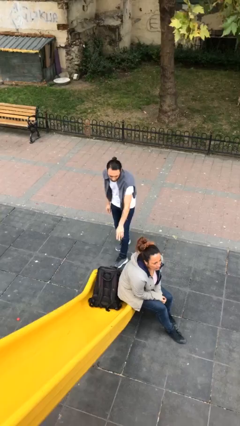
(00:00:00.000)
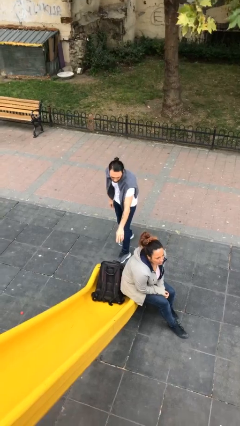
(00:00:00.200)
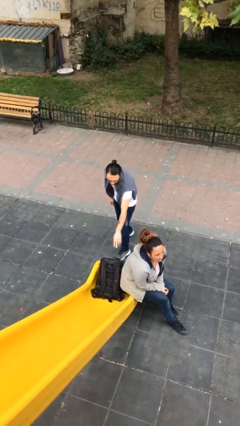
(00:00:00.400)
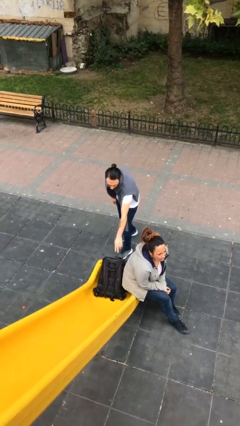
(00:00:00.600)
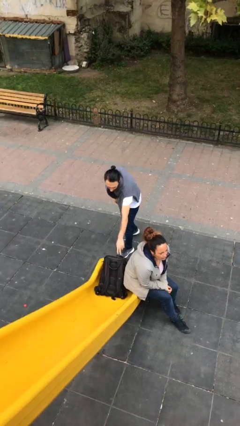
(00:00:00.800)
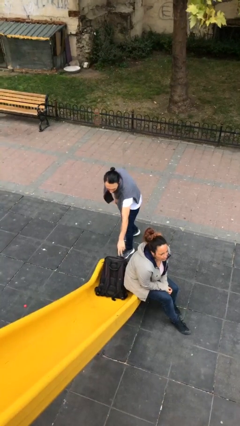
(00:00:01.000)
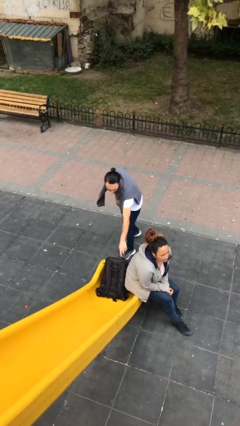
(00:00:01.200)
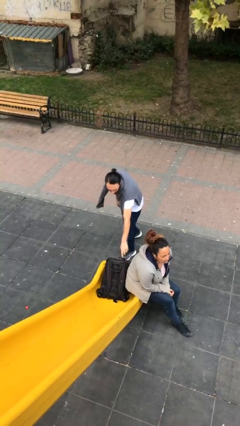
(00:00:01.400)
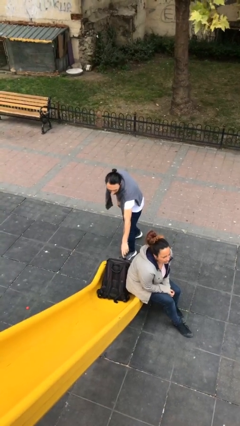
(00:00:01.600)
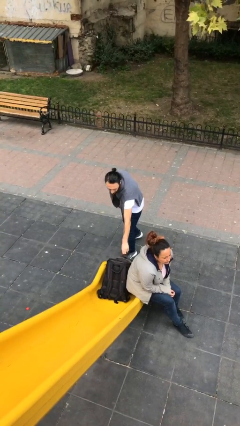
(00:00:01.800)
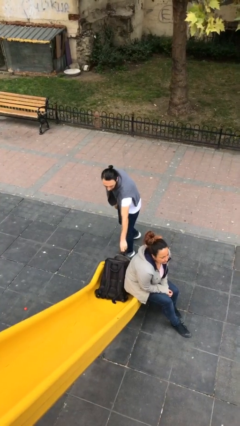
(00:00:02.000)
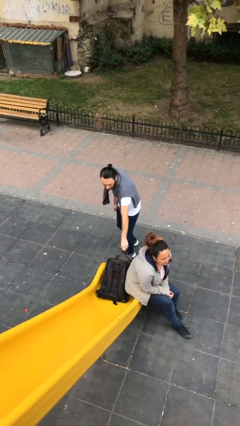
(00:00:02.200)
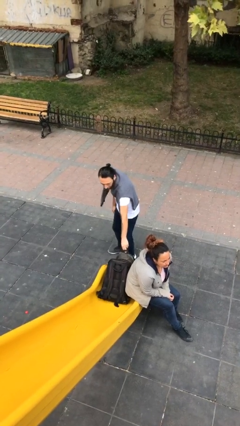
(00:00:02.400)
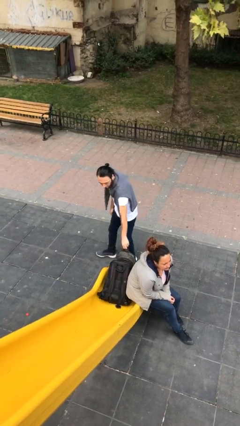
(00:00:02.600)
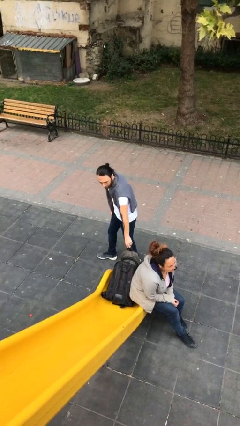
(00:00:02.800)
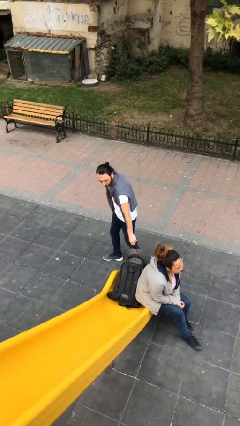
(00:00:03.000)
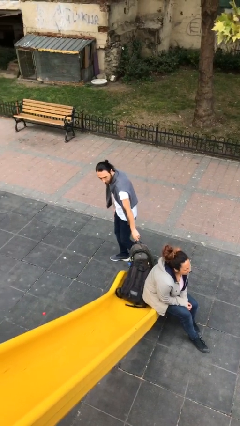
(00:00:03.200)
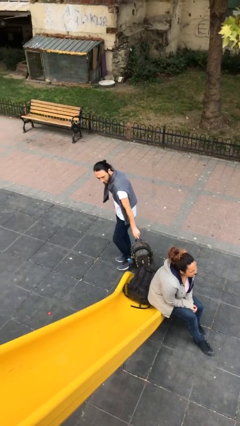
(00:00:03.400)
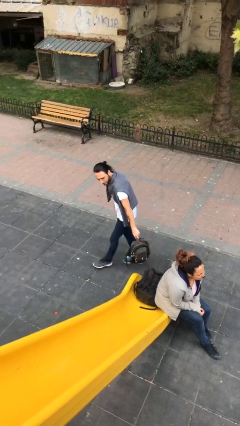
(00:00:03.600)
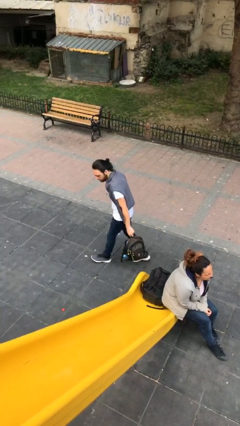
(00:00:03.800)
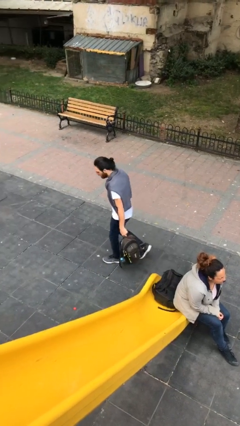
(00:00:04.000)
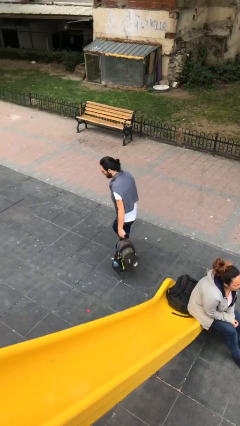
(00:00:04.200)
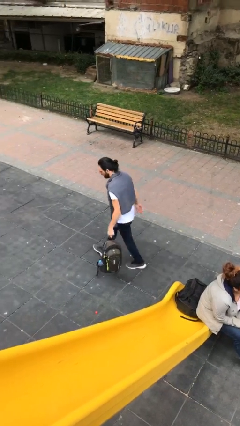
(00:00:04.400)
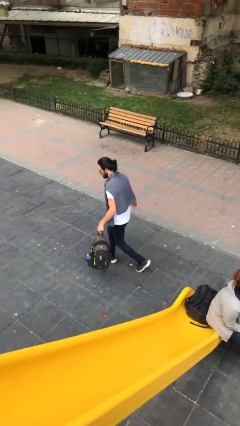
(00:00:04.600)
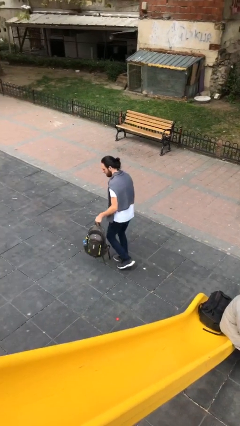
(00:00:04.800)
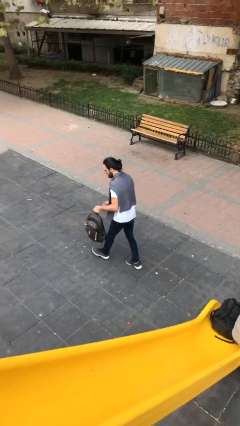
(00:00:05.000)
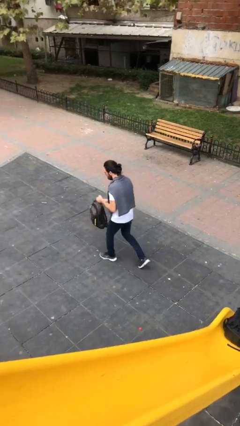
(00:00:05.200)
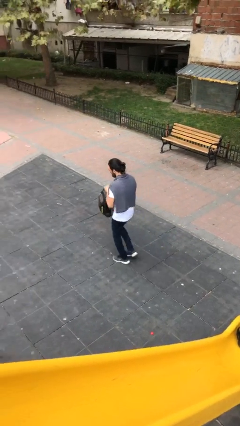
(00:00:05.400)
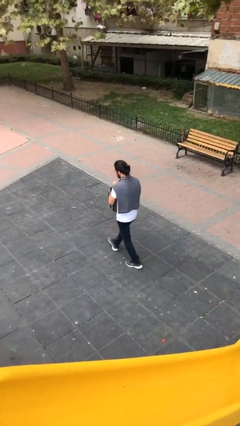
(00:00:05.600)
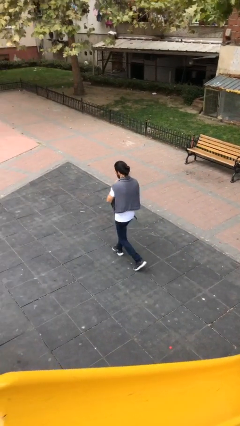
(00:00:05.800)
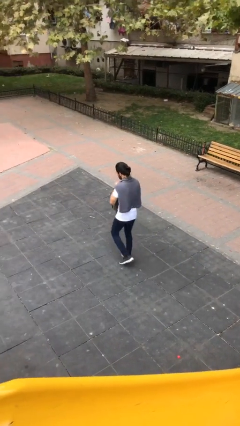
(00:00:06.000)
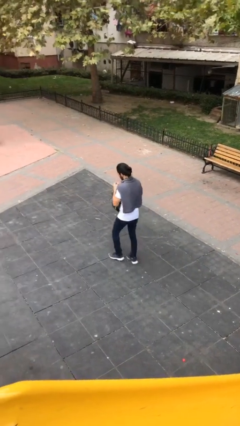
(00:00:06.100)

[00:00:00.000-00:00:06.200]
person steals object from person

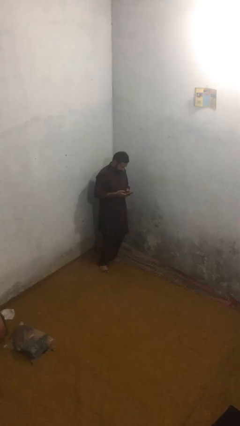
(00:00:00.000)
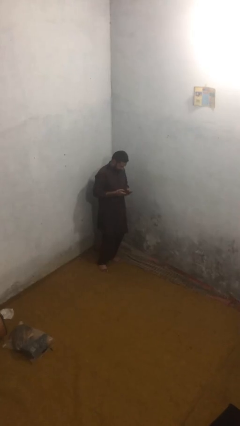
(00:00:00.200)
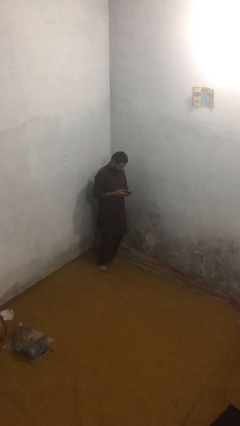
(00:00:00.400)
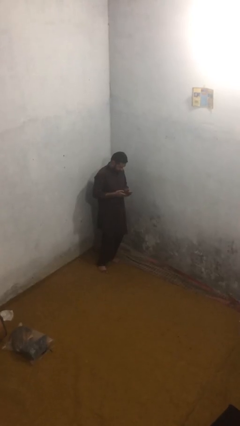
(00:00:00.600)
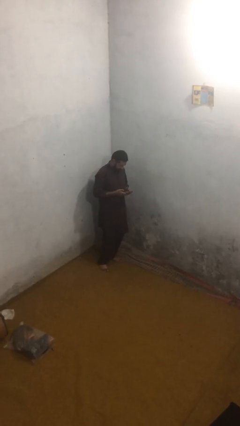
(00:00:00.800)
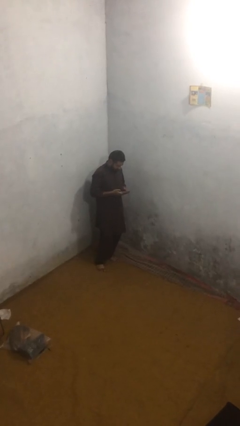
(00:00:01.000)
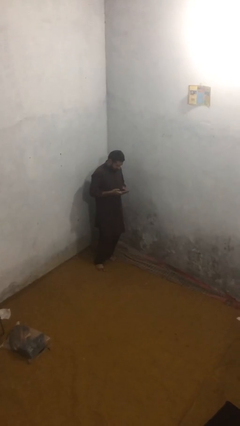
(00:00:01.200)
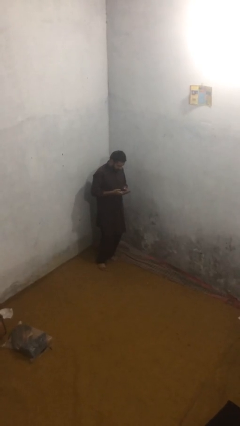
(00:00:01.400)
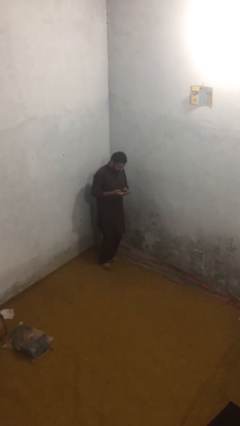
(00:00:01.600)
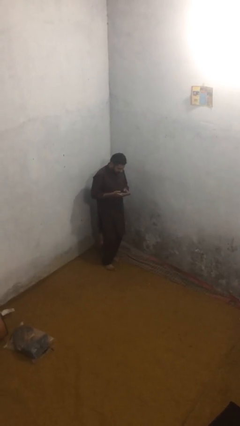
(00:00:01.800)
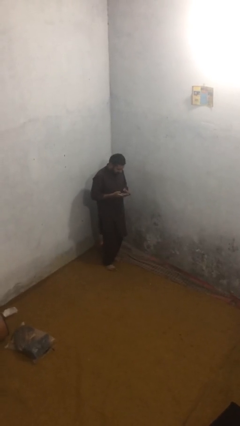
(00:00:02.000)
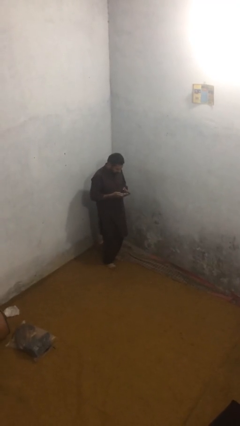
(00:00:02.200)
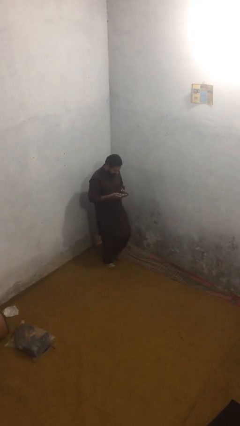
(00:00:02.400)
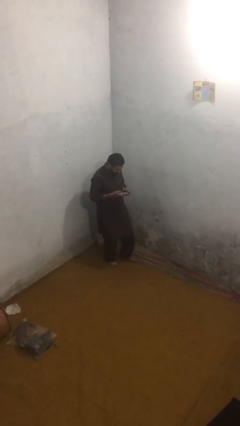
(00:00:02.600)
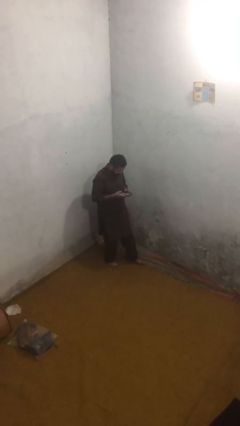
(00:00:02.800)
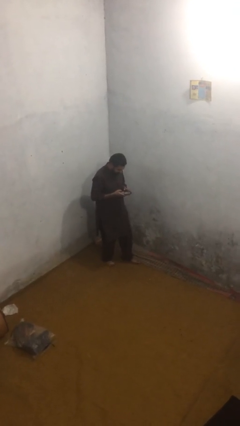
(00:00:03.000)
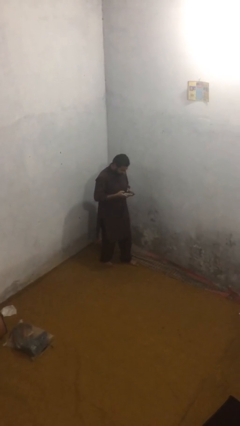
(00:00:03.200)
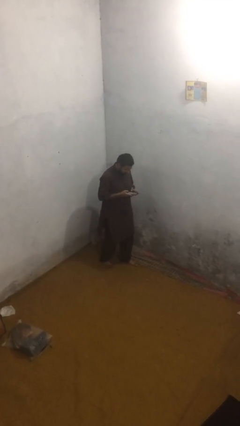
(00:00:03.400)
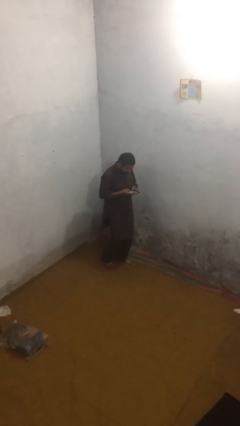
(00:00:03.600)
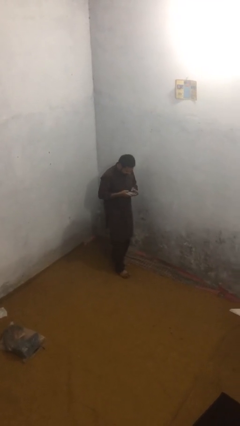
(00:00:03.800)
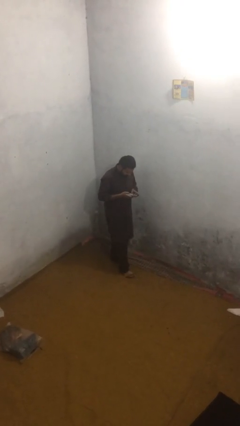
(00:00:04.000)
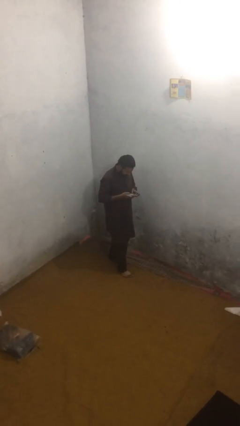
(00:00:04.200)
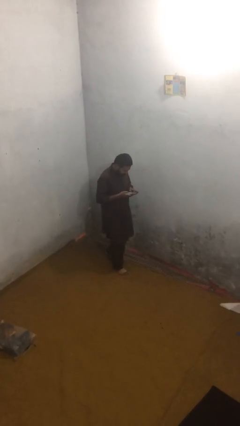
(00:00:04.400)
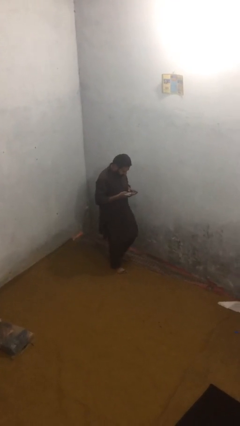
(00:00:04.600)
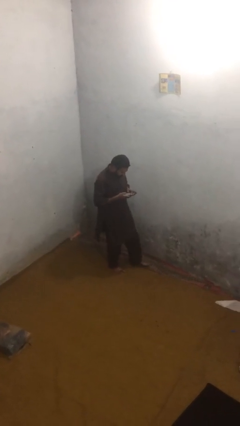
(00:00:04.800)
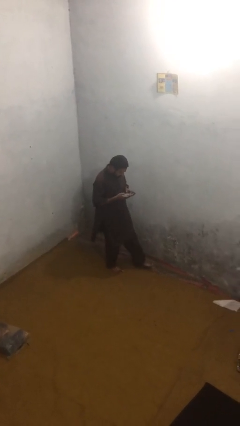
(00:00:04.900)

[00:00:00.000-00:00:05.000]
person texts on phone

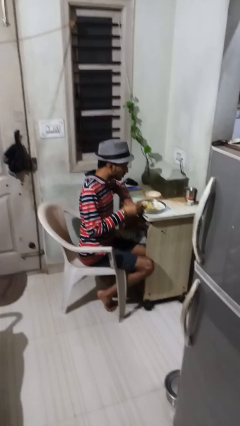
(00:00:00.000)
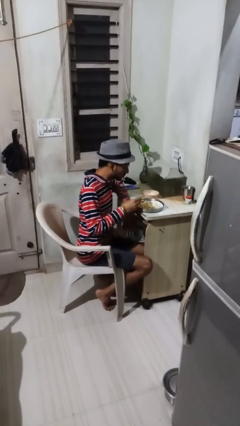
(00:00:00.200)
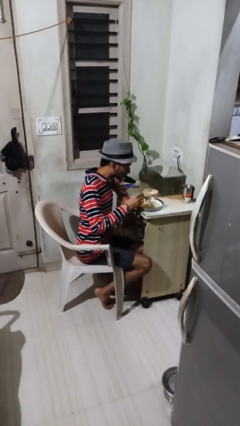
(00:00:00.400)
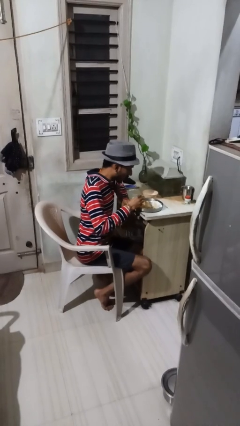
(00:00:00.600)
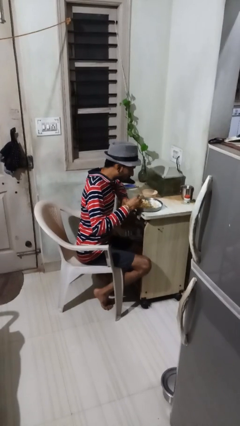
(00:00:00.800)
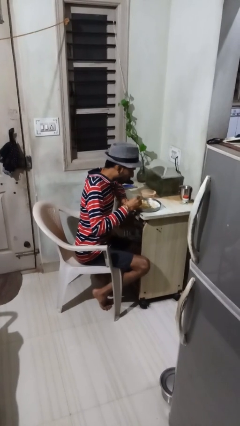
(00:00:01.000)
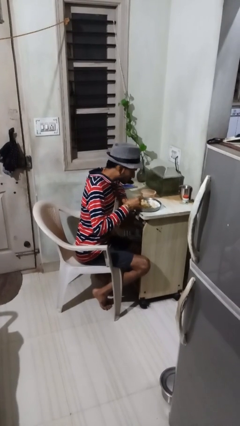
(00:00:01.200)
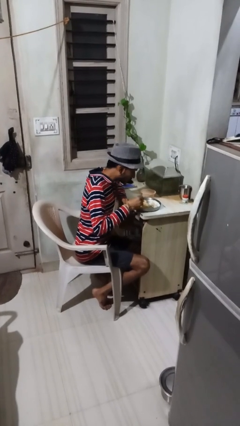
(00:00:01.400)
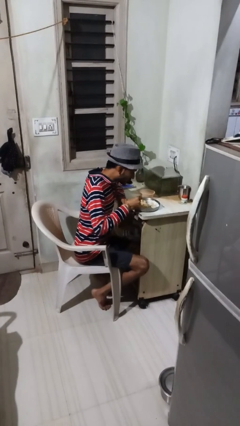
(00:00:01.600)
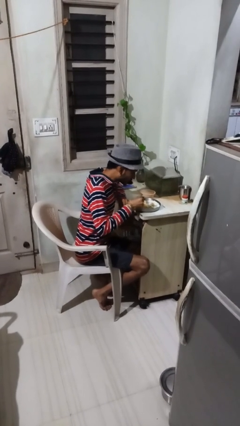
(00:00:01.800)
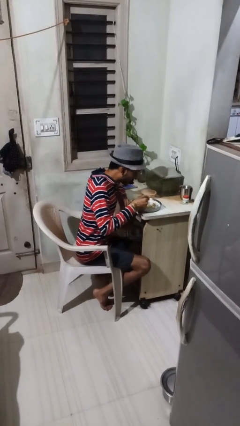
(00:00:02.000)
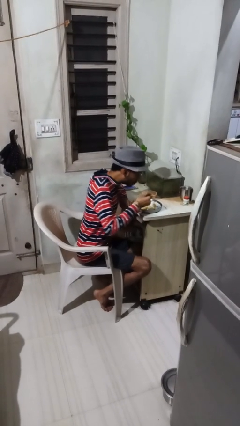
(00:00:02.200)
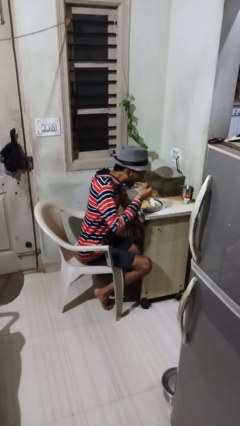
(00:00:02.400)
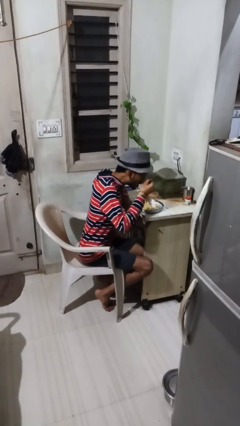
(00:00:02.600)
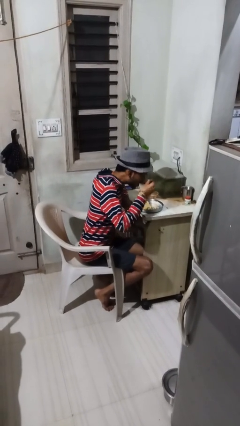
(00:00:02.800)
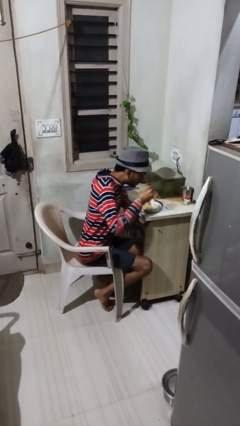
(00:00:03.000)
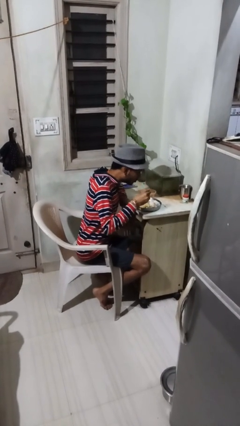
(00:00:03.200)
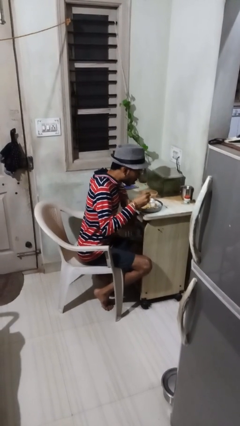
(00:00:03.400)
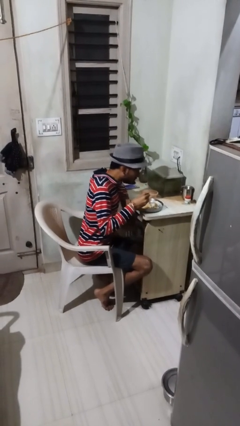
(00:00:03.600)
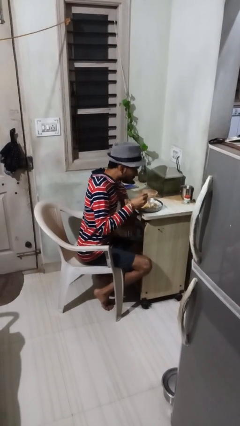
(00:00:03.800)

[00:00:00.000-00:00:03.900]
person eats with utensil

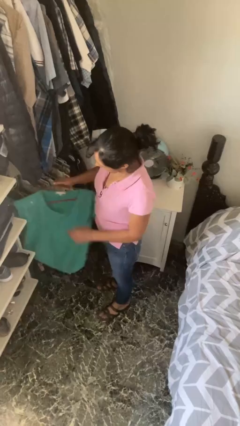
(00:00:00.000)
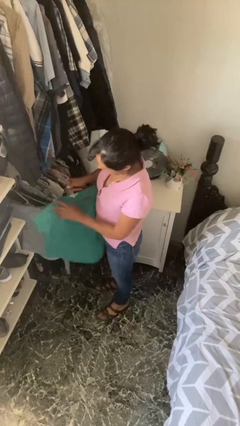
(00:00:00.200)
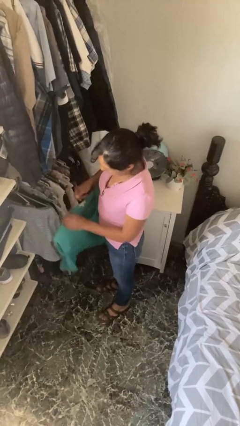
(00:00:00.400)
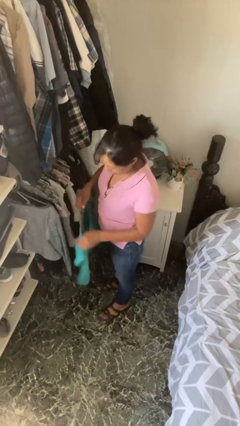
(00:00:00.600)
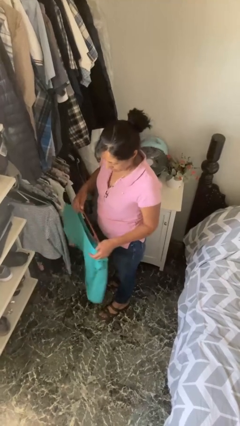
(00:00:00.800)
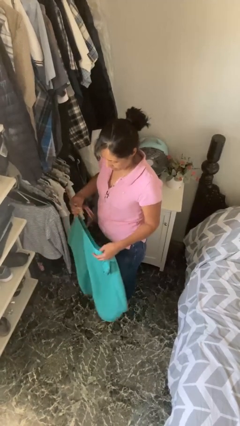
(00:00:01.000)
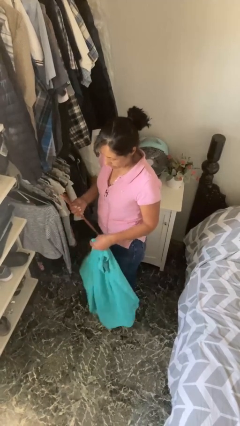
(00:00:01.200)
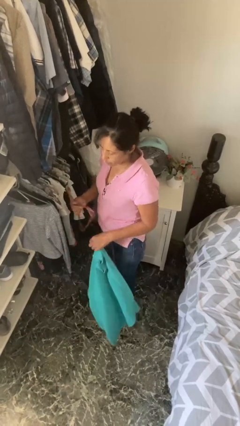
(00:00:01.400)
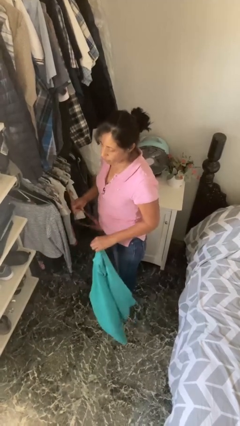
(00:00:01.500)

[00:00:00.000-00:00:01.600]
person takes clothes from closet

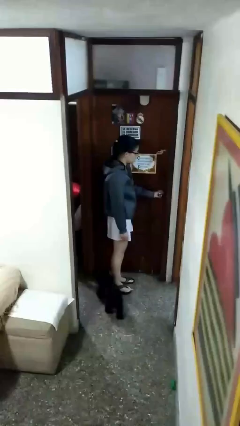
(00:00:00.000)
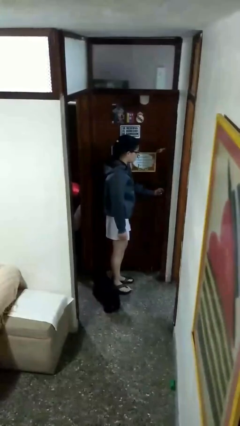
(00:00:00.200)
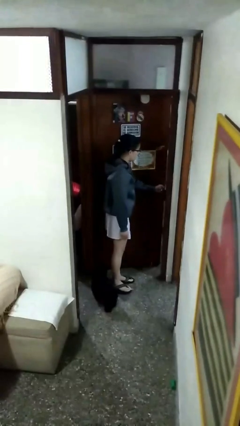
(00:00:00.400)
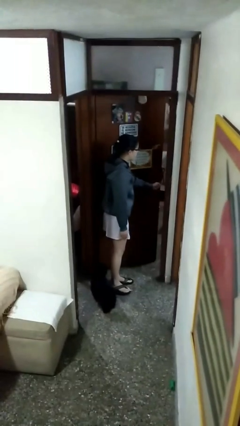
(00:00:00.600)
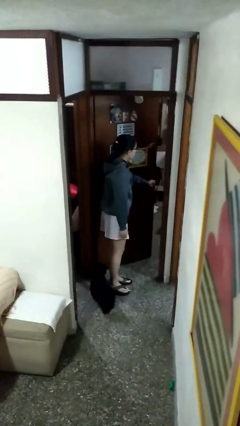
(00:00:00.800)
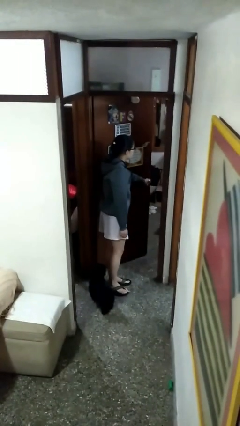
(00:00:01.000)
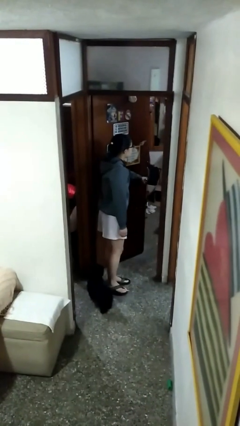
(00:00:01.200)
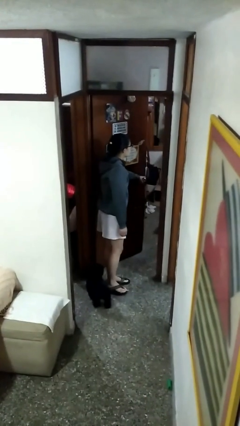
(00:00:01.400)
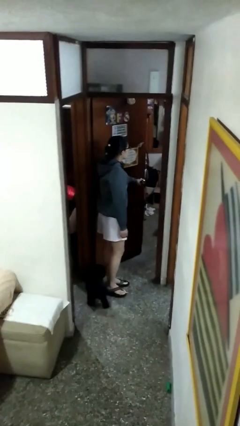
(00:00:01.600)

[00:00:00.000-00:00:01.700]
person opens facility door
